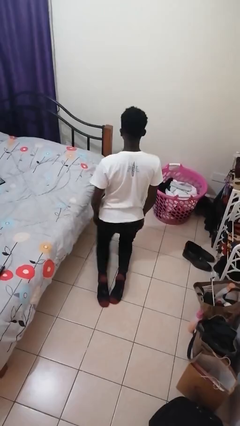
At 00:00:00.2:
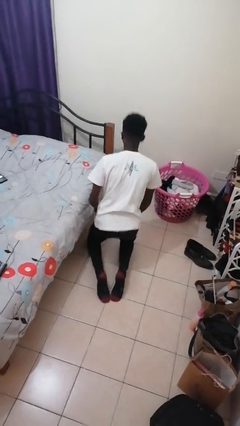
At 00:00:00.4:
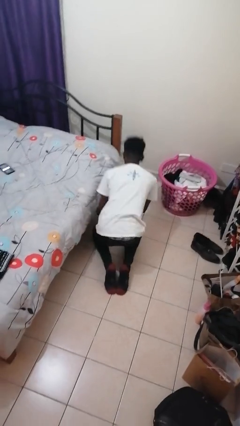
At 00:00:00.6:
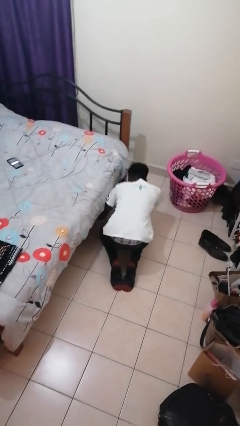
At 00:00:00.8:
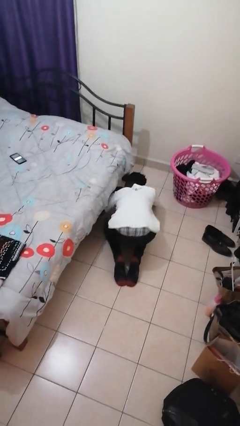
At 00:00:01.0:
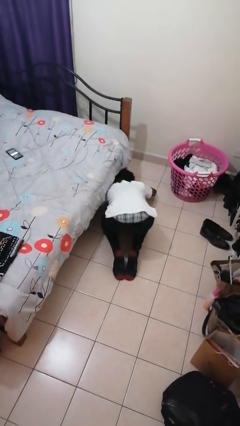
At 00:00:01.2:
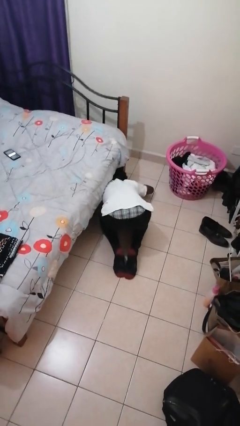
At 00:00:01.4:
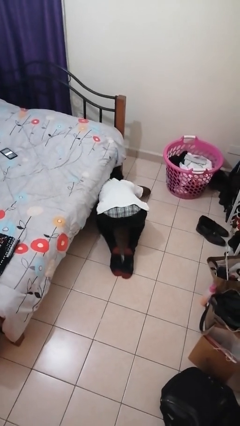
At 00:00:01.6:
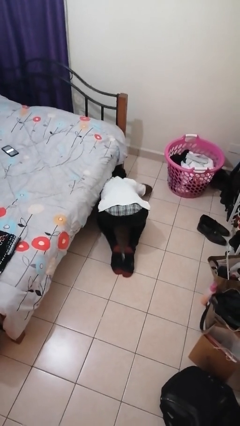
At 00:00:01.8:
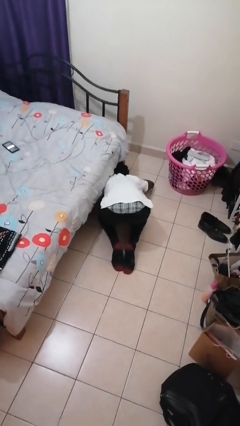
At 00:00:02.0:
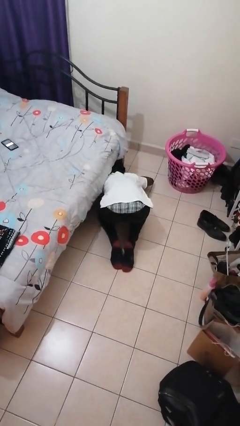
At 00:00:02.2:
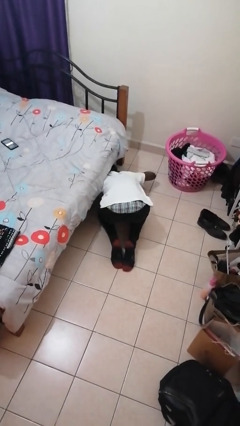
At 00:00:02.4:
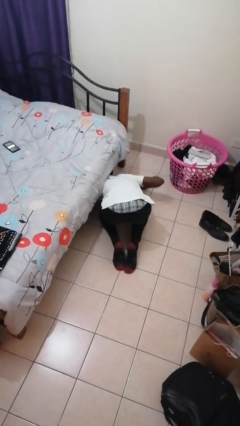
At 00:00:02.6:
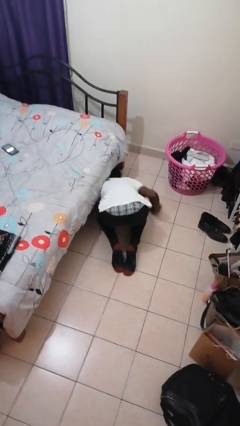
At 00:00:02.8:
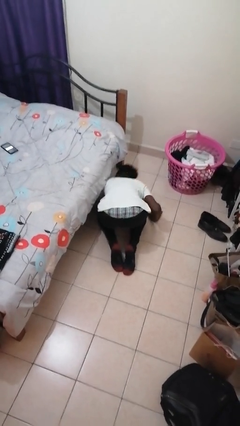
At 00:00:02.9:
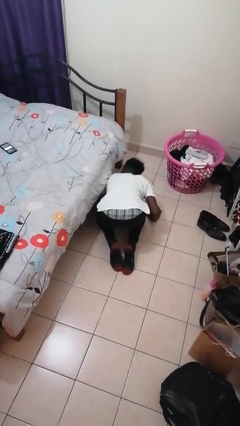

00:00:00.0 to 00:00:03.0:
person searches under bed

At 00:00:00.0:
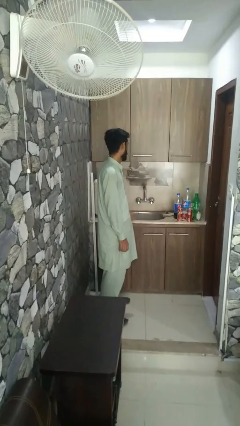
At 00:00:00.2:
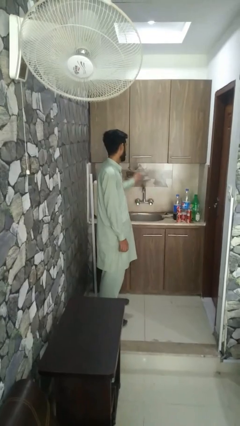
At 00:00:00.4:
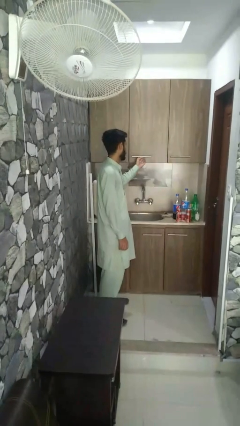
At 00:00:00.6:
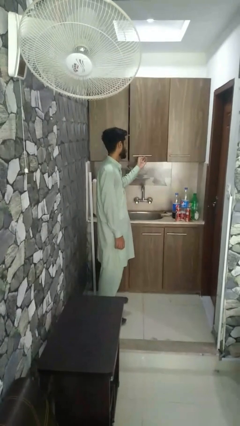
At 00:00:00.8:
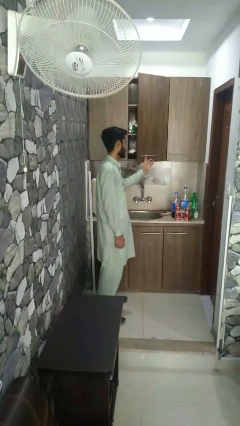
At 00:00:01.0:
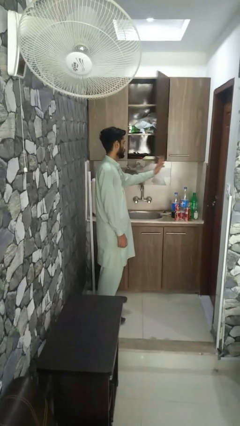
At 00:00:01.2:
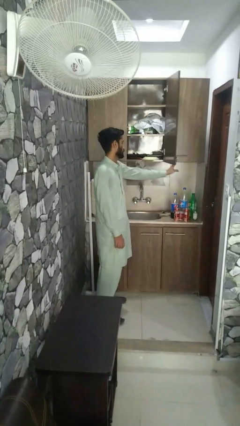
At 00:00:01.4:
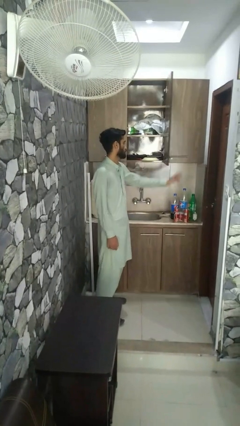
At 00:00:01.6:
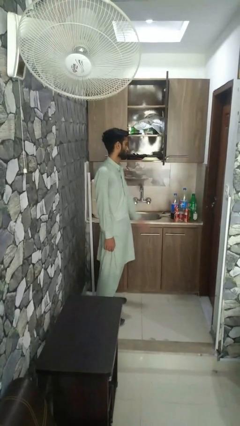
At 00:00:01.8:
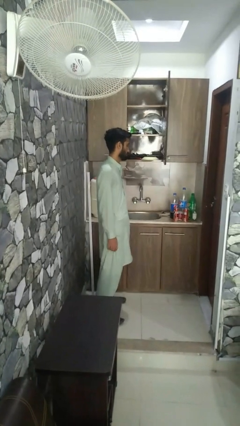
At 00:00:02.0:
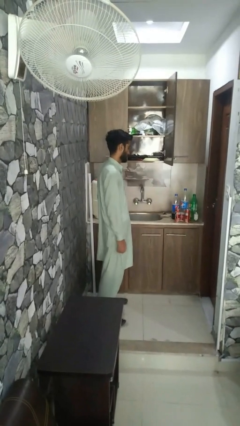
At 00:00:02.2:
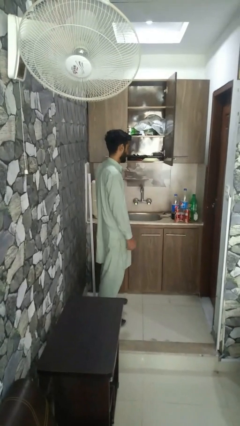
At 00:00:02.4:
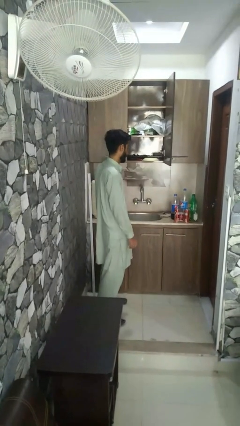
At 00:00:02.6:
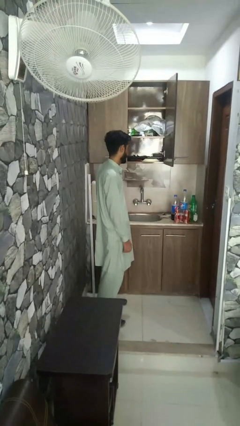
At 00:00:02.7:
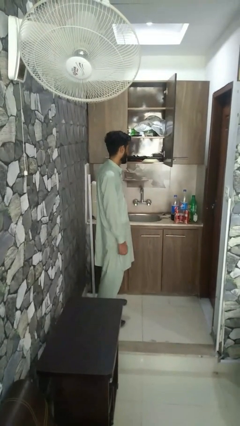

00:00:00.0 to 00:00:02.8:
person opens closet door

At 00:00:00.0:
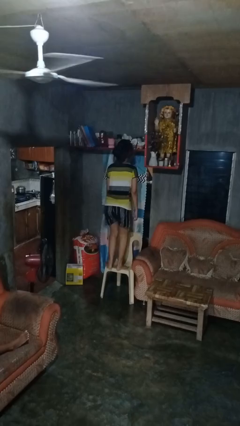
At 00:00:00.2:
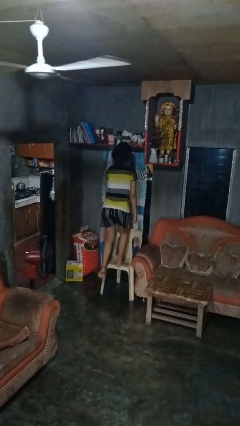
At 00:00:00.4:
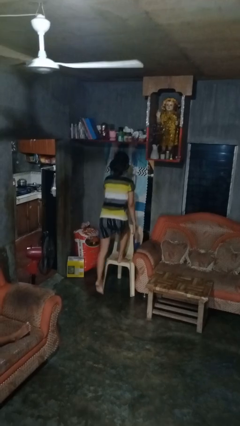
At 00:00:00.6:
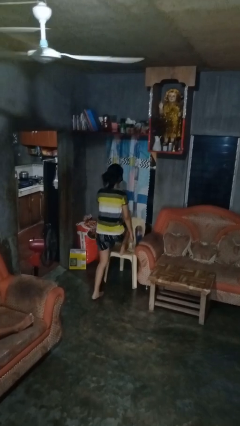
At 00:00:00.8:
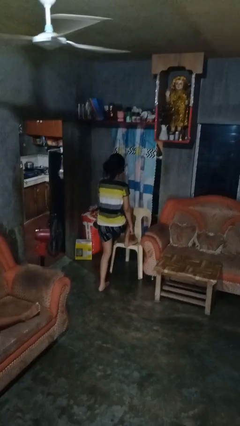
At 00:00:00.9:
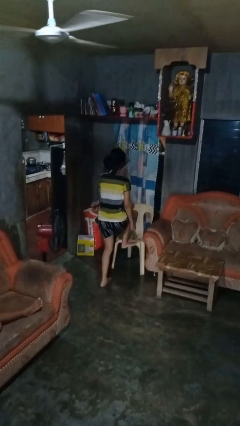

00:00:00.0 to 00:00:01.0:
person climbs off chair

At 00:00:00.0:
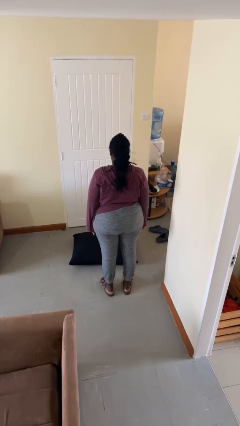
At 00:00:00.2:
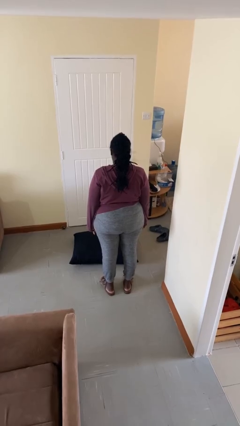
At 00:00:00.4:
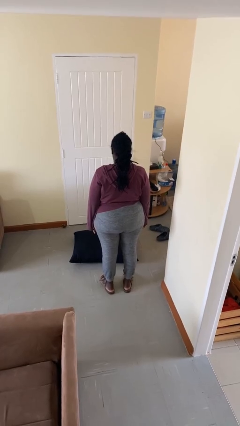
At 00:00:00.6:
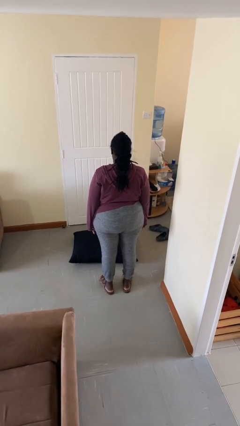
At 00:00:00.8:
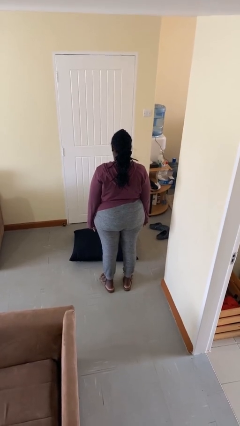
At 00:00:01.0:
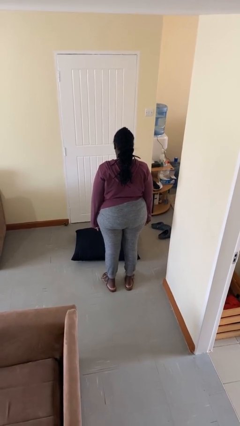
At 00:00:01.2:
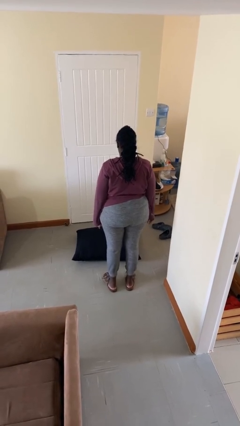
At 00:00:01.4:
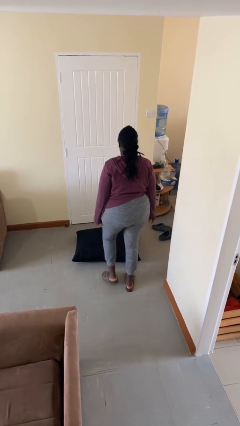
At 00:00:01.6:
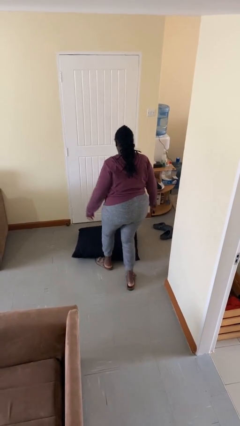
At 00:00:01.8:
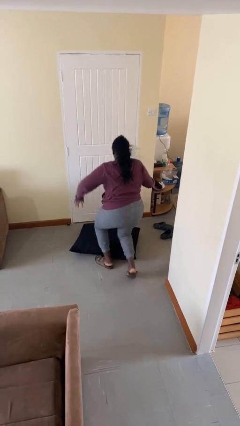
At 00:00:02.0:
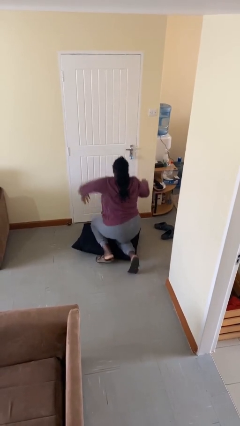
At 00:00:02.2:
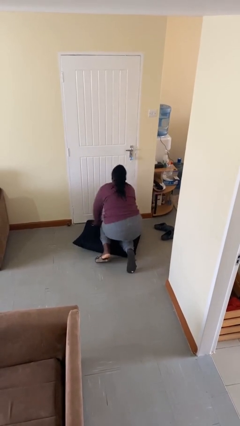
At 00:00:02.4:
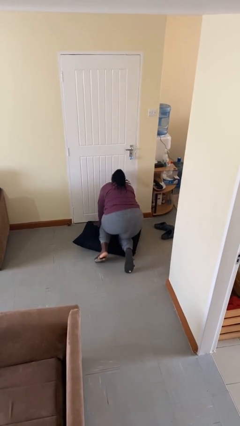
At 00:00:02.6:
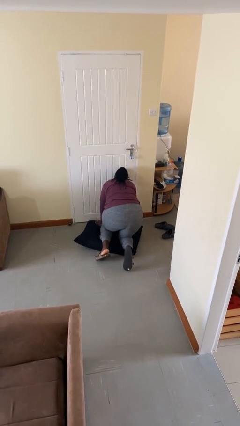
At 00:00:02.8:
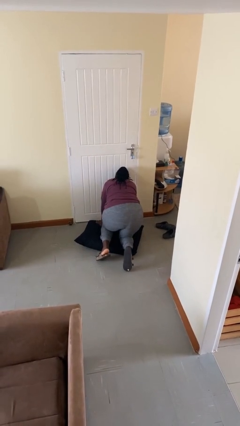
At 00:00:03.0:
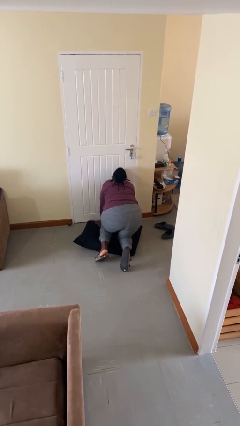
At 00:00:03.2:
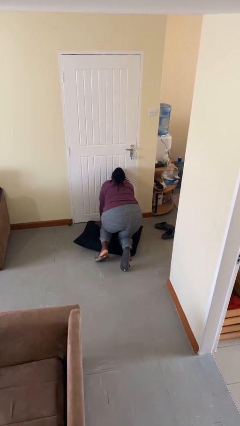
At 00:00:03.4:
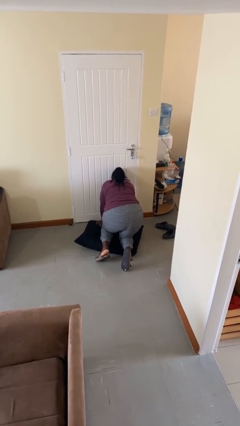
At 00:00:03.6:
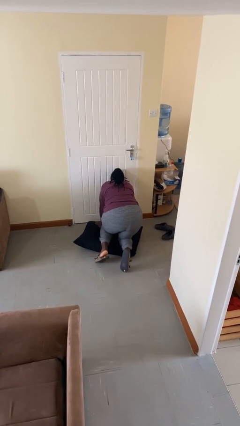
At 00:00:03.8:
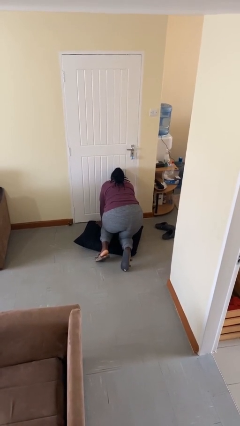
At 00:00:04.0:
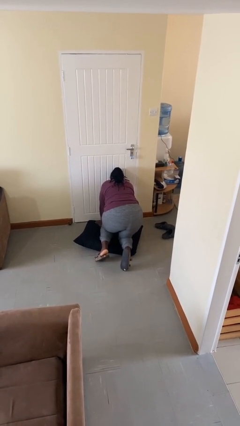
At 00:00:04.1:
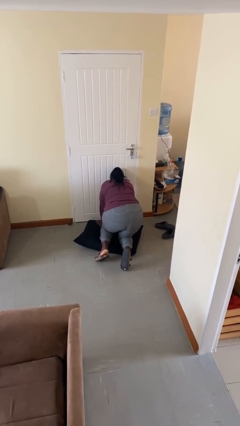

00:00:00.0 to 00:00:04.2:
person trips on object on floor

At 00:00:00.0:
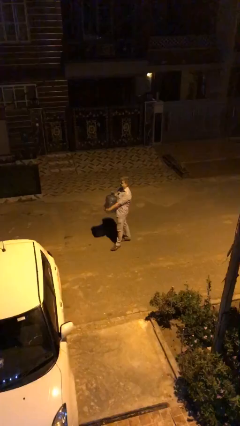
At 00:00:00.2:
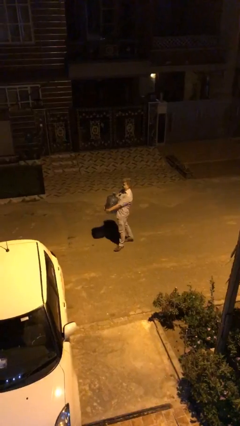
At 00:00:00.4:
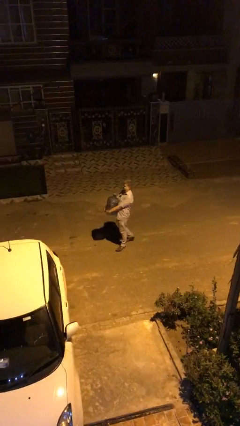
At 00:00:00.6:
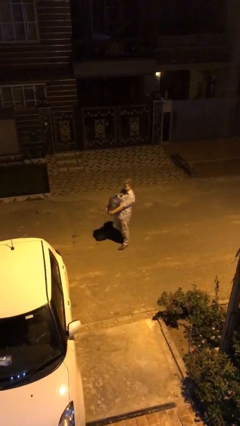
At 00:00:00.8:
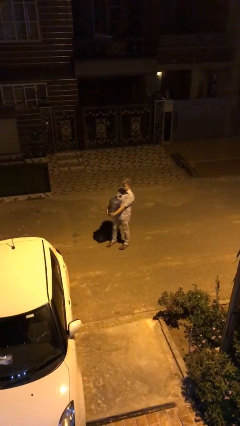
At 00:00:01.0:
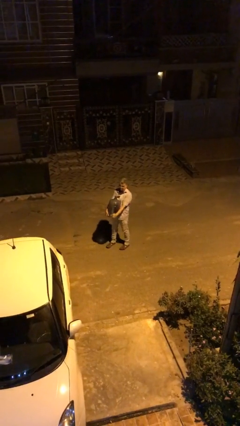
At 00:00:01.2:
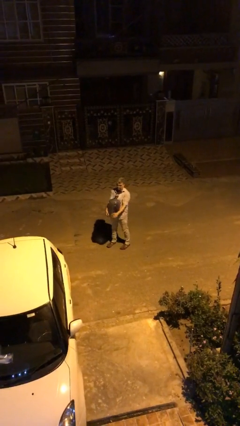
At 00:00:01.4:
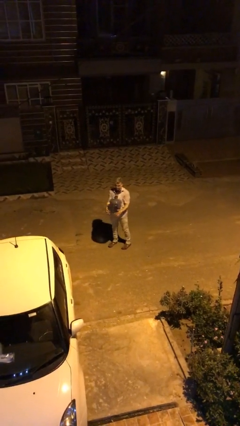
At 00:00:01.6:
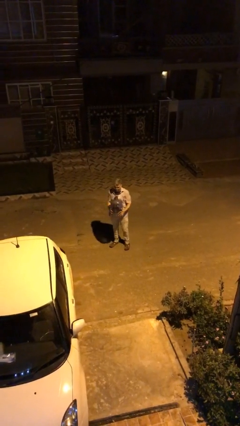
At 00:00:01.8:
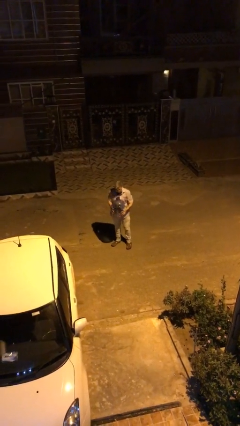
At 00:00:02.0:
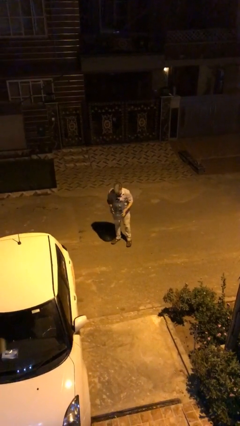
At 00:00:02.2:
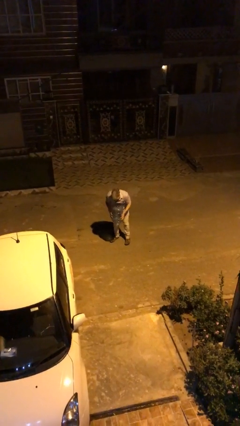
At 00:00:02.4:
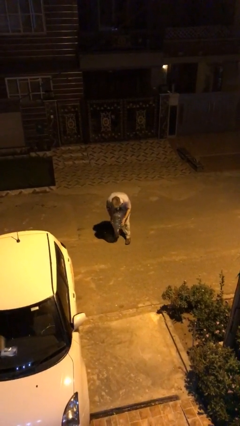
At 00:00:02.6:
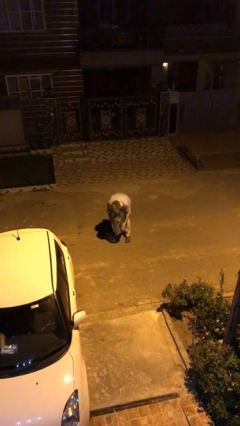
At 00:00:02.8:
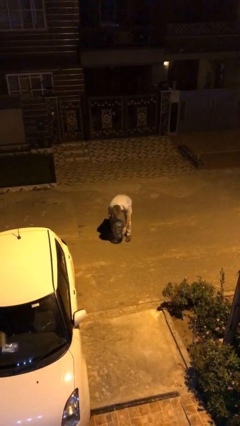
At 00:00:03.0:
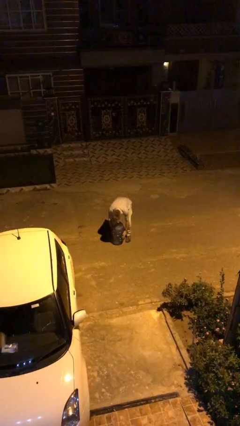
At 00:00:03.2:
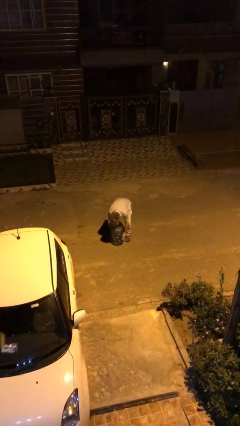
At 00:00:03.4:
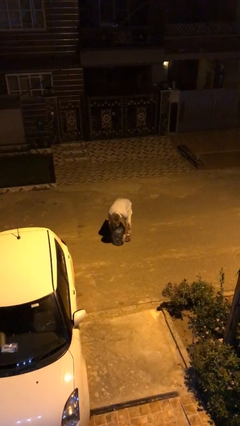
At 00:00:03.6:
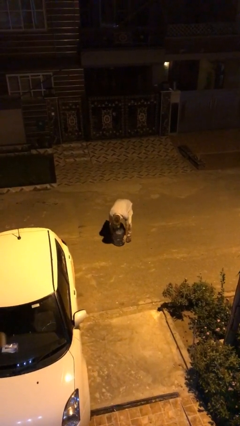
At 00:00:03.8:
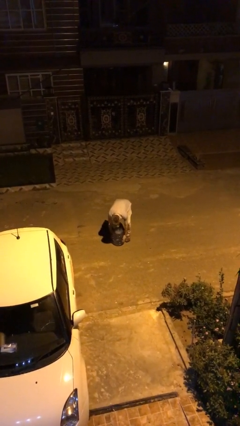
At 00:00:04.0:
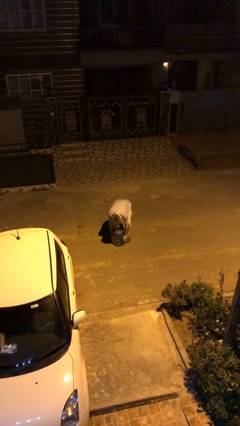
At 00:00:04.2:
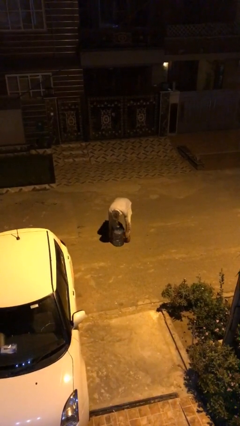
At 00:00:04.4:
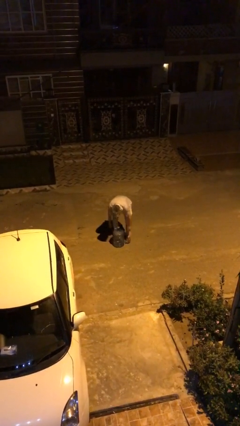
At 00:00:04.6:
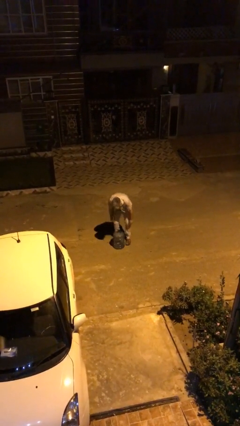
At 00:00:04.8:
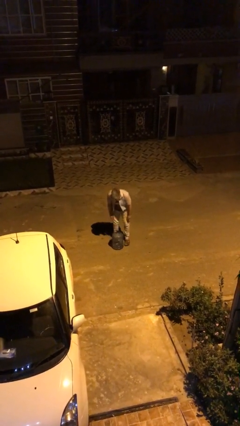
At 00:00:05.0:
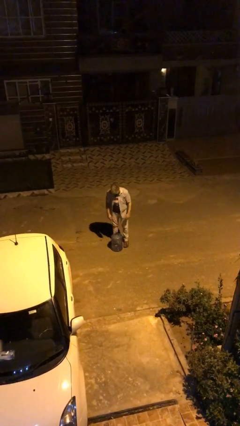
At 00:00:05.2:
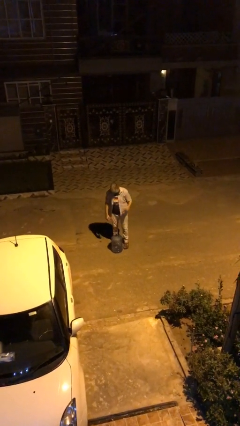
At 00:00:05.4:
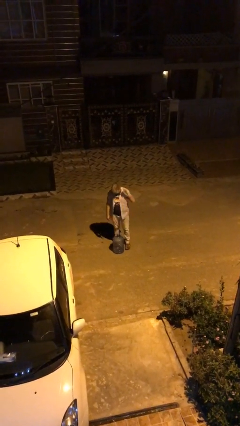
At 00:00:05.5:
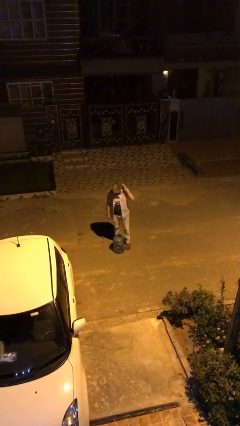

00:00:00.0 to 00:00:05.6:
person puts down object on floor

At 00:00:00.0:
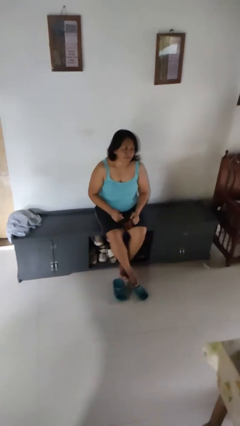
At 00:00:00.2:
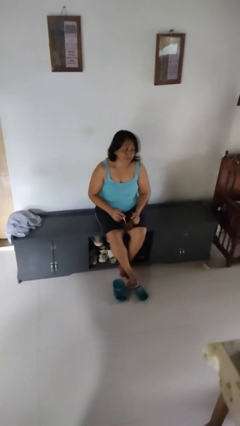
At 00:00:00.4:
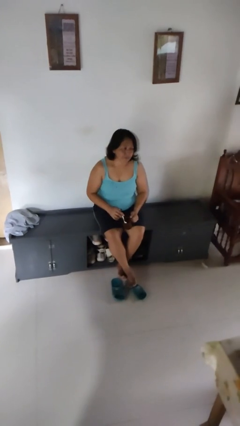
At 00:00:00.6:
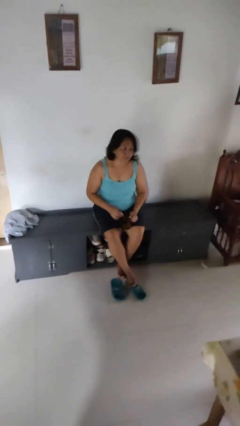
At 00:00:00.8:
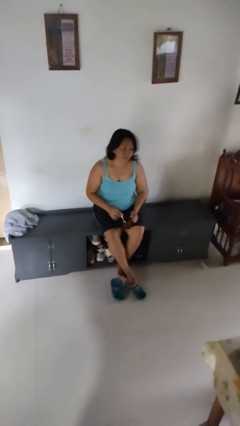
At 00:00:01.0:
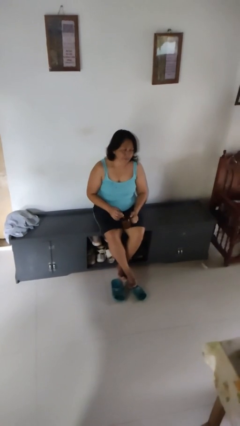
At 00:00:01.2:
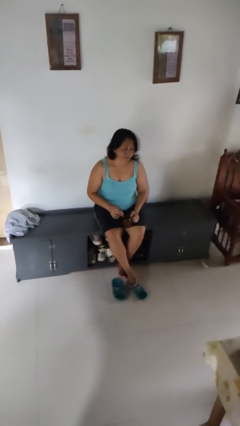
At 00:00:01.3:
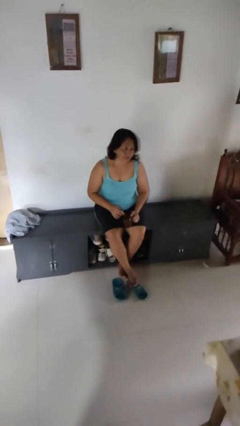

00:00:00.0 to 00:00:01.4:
person stirs mug
